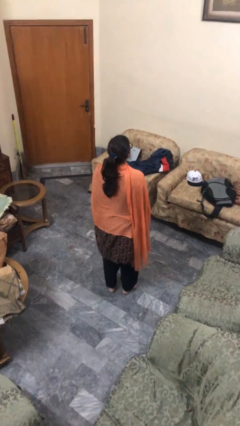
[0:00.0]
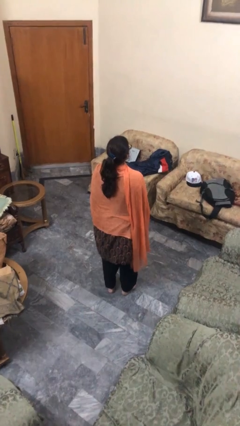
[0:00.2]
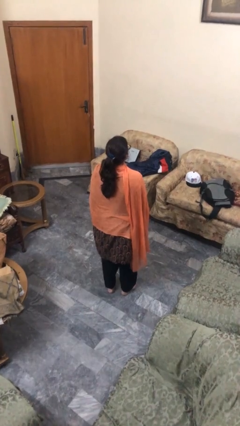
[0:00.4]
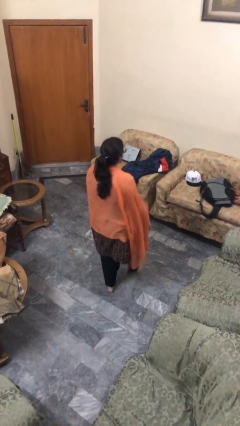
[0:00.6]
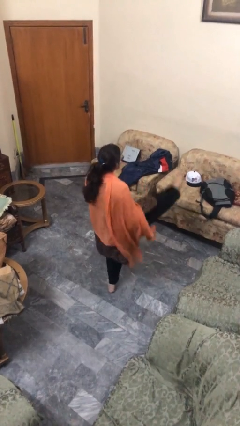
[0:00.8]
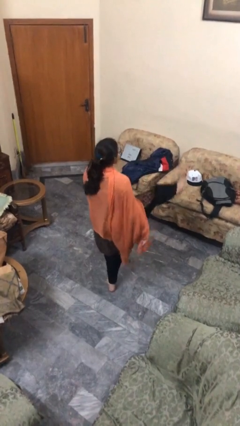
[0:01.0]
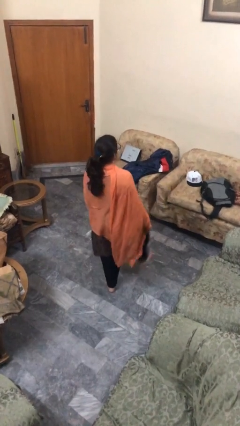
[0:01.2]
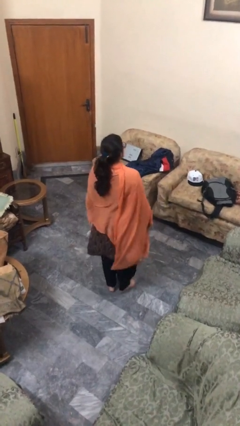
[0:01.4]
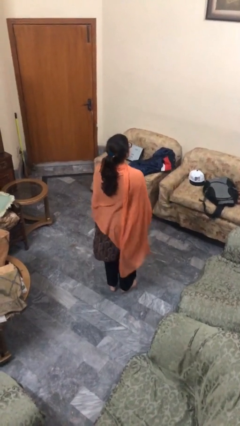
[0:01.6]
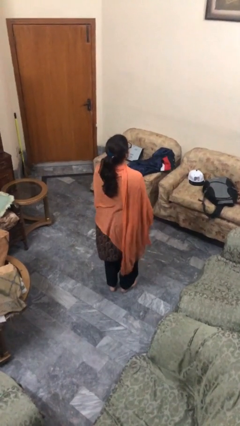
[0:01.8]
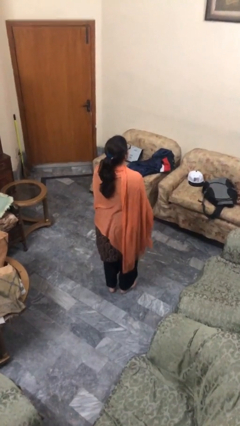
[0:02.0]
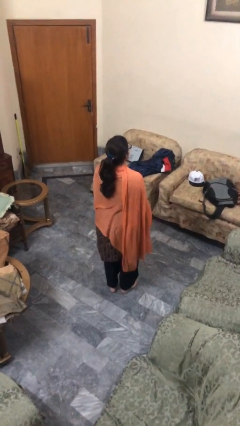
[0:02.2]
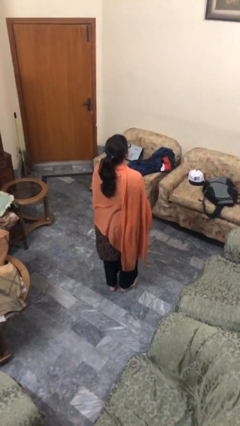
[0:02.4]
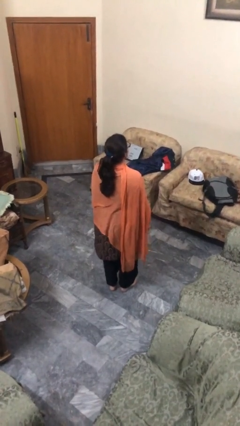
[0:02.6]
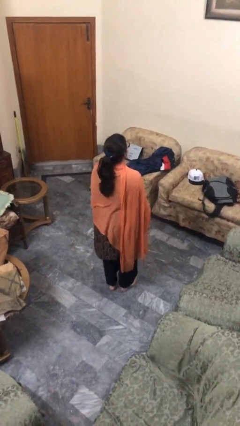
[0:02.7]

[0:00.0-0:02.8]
person karate kicks

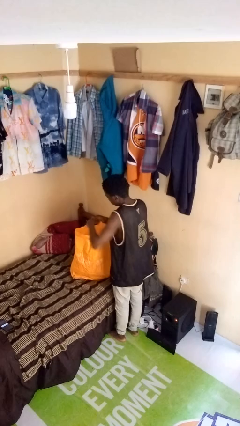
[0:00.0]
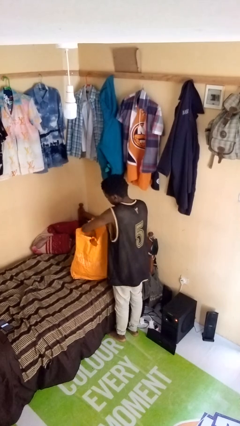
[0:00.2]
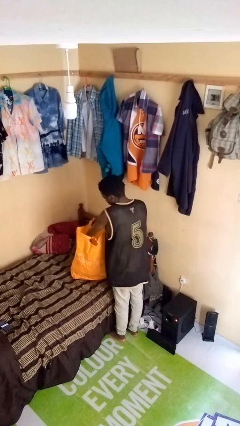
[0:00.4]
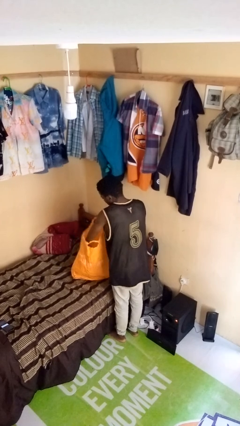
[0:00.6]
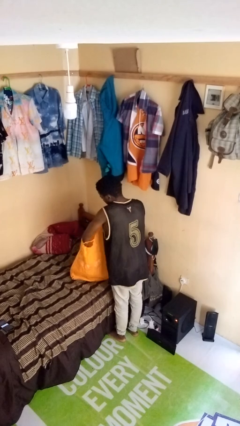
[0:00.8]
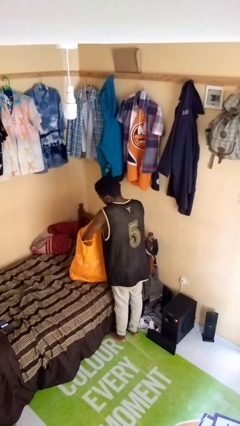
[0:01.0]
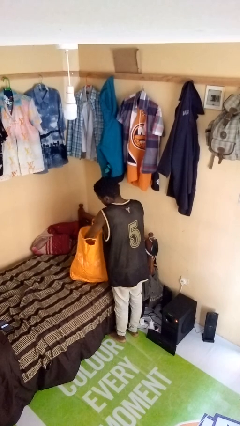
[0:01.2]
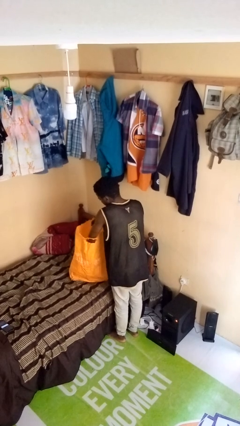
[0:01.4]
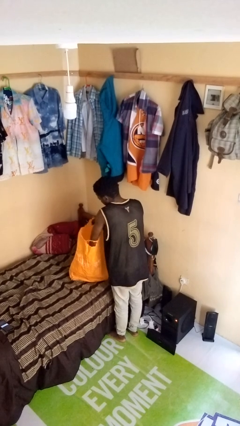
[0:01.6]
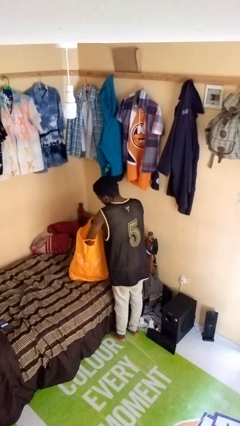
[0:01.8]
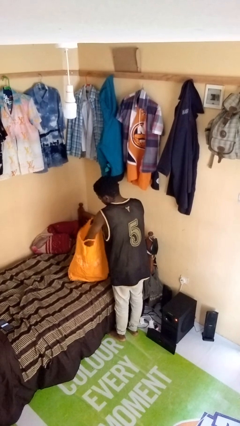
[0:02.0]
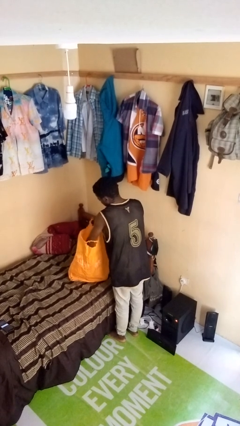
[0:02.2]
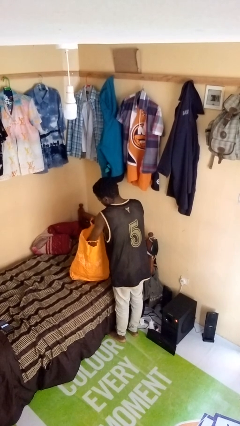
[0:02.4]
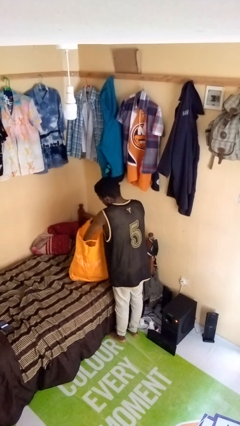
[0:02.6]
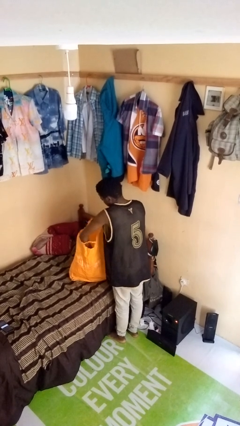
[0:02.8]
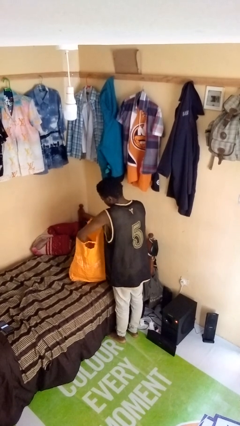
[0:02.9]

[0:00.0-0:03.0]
person searches in bag

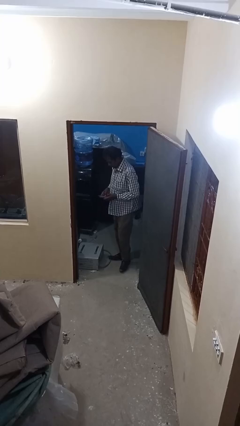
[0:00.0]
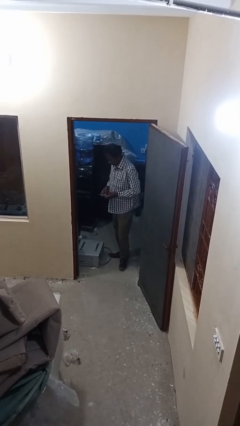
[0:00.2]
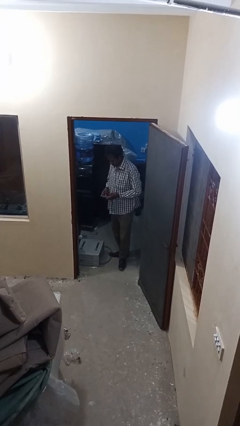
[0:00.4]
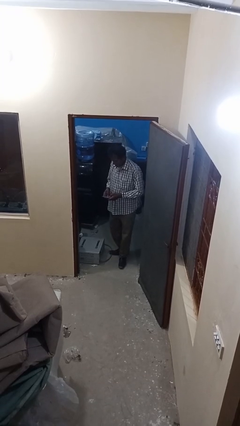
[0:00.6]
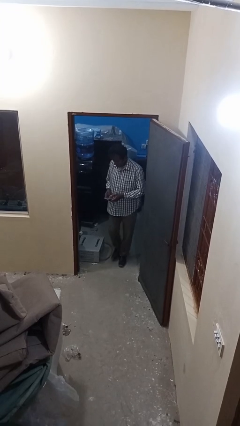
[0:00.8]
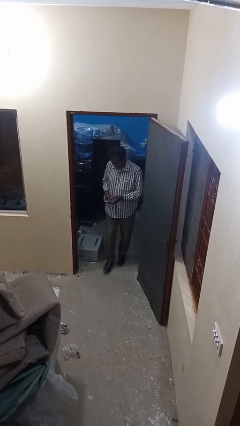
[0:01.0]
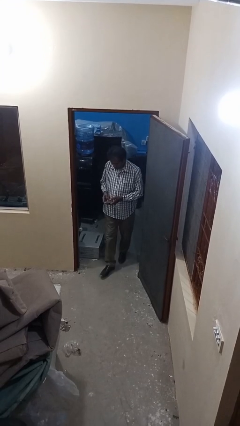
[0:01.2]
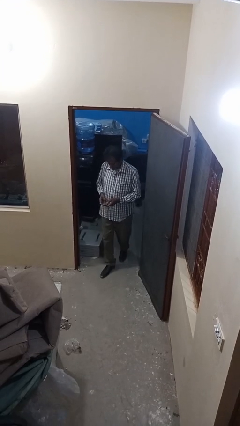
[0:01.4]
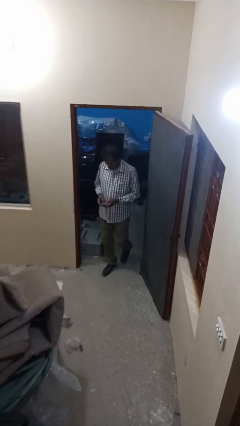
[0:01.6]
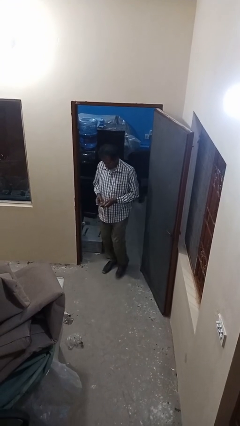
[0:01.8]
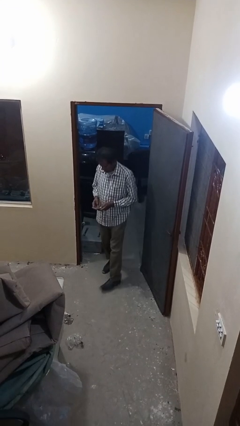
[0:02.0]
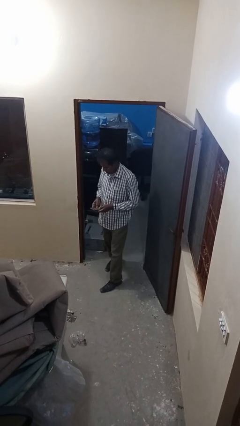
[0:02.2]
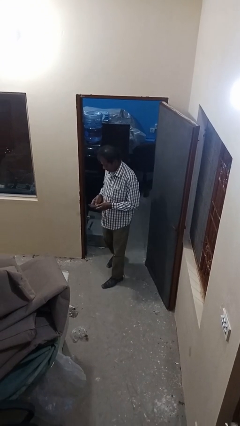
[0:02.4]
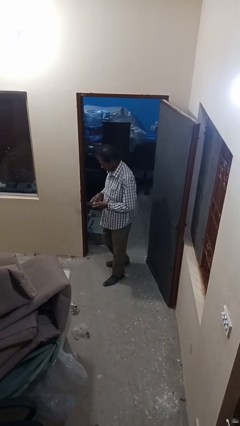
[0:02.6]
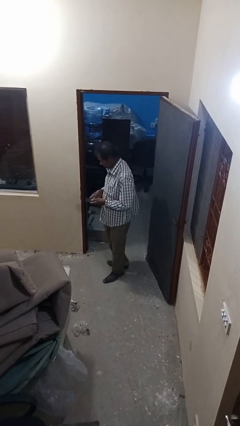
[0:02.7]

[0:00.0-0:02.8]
person enters scene through structure

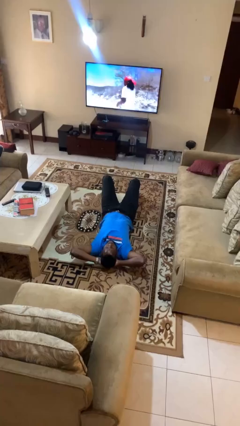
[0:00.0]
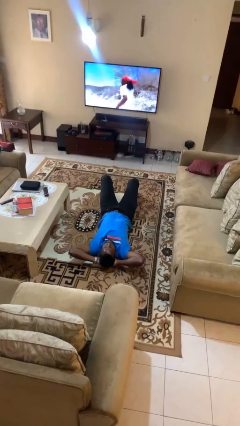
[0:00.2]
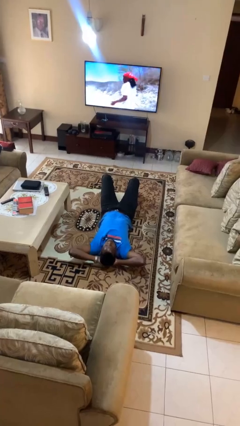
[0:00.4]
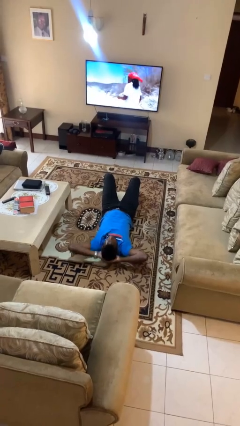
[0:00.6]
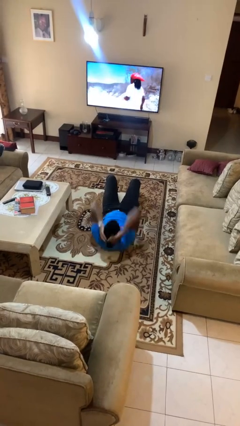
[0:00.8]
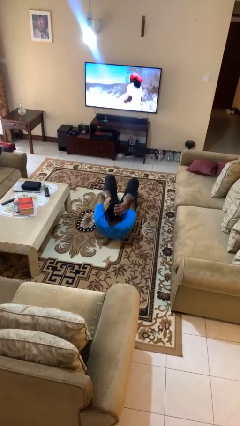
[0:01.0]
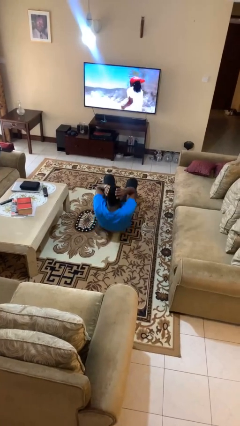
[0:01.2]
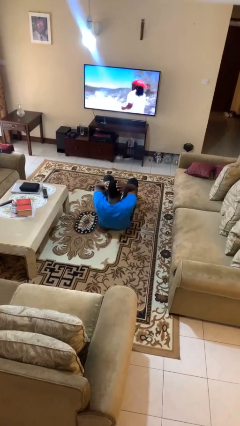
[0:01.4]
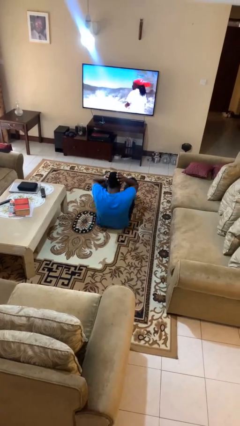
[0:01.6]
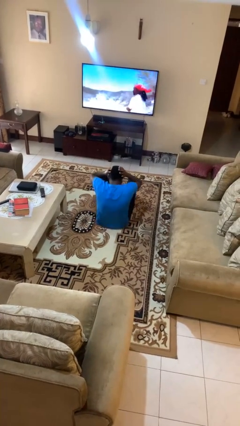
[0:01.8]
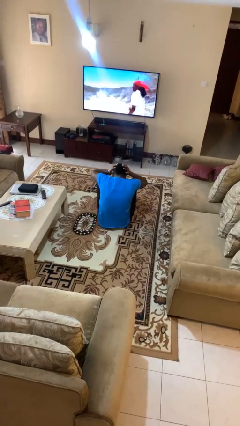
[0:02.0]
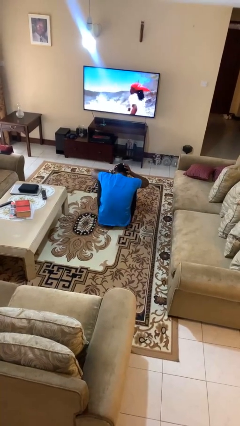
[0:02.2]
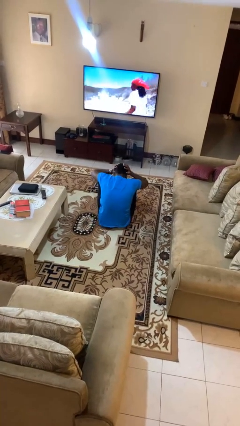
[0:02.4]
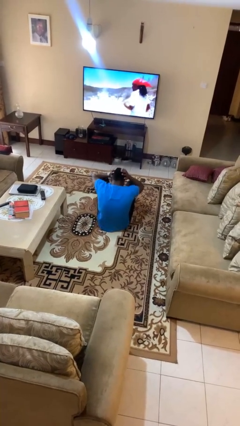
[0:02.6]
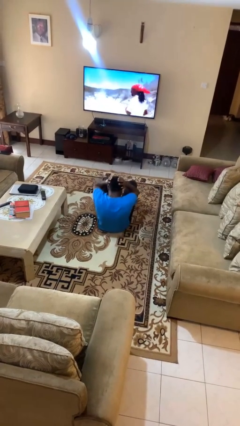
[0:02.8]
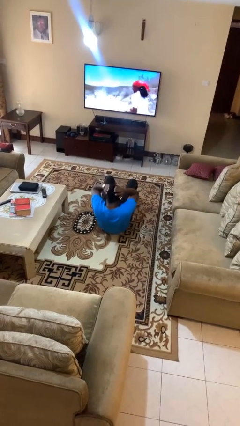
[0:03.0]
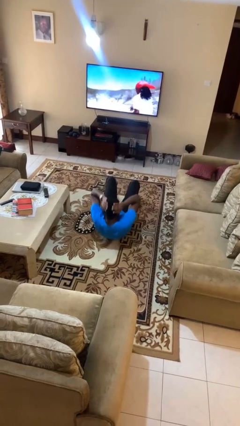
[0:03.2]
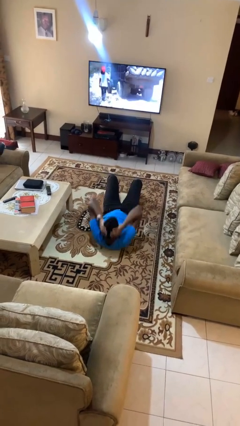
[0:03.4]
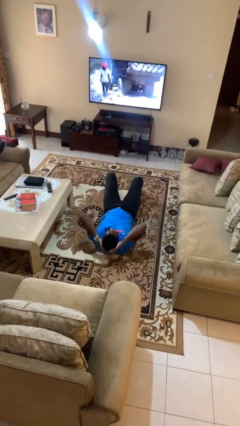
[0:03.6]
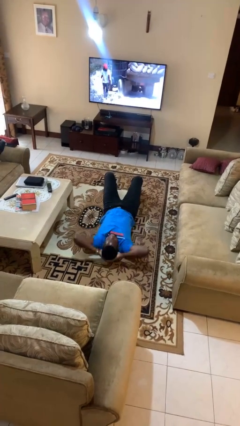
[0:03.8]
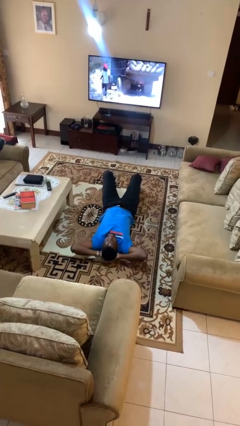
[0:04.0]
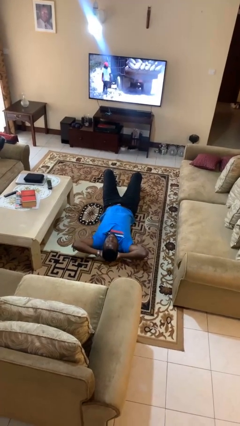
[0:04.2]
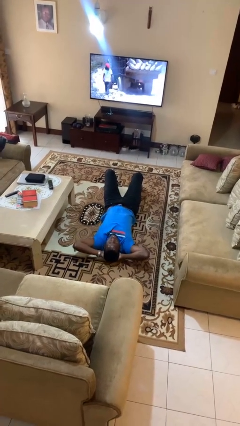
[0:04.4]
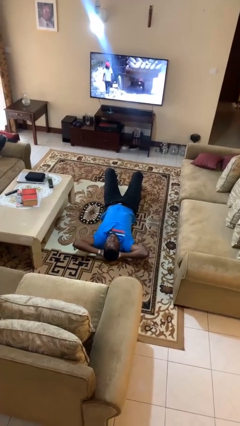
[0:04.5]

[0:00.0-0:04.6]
person exercises with situp

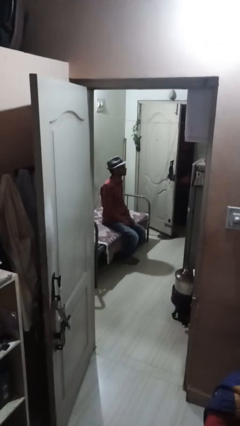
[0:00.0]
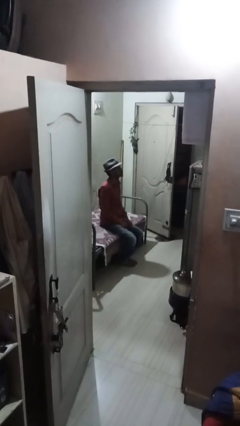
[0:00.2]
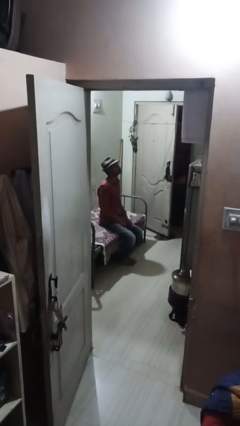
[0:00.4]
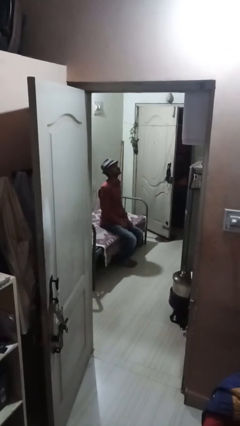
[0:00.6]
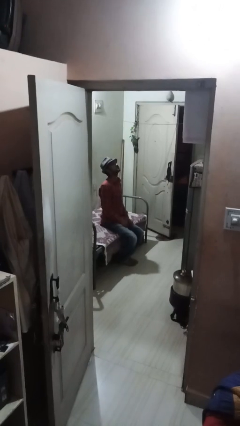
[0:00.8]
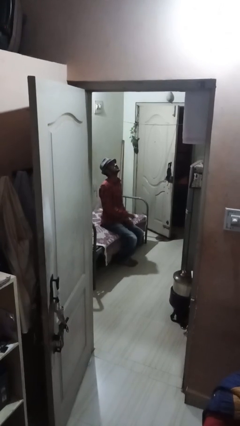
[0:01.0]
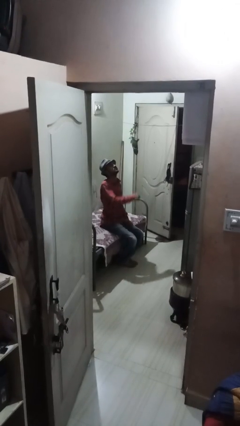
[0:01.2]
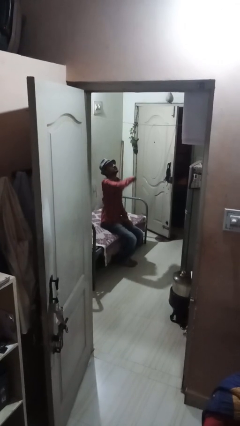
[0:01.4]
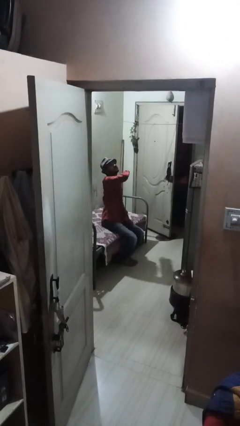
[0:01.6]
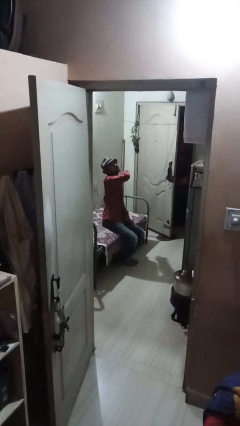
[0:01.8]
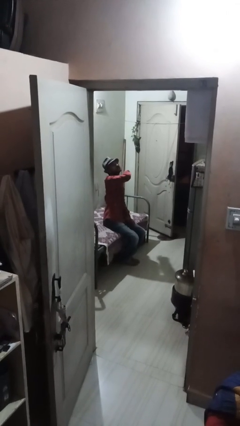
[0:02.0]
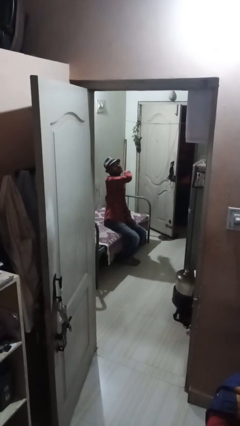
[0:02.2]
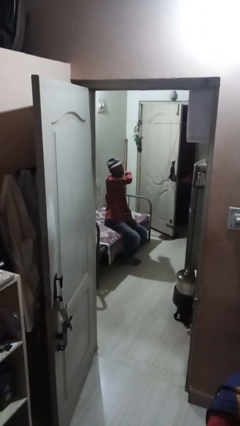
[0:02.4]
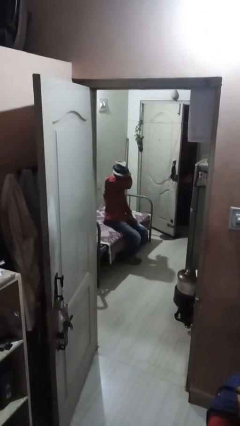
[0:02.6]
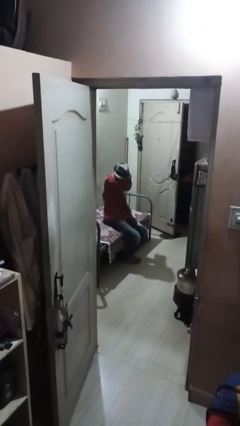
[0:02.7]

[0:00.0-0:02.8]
person sneezes into arm

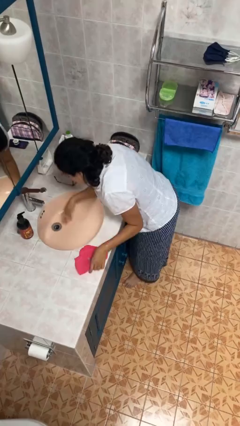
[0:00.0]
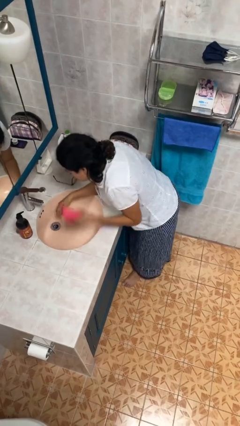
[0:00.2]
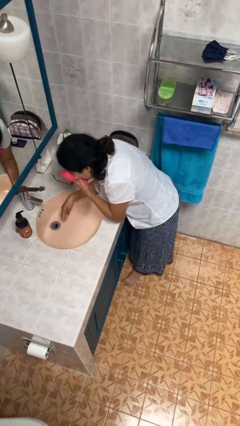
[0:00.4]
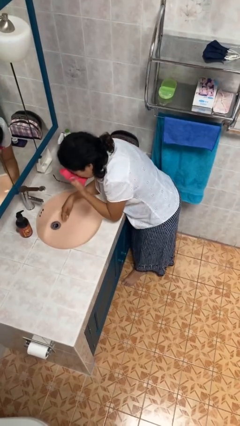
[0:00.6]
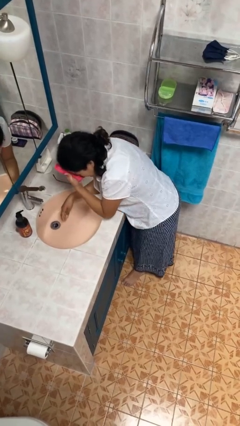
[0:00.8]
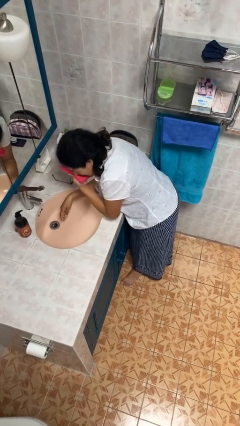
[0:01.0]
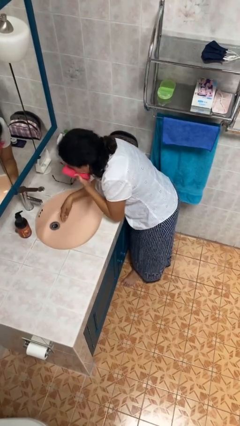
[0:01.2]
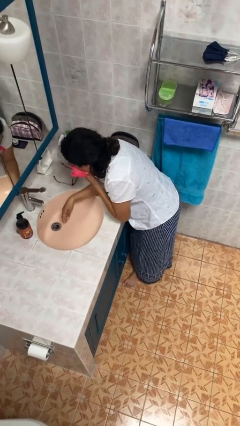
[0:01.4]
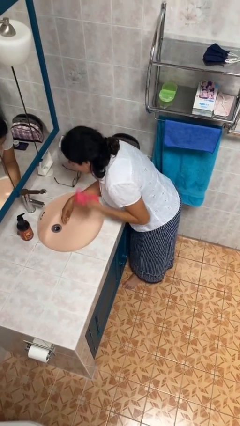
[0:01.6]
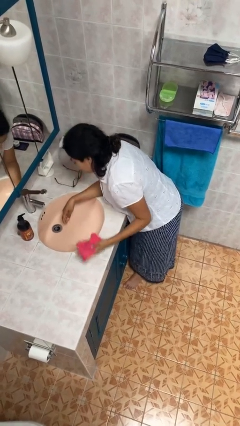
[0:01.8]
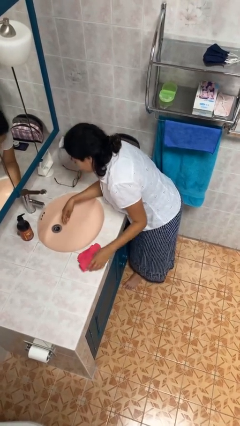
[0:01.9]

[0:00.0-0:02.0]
person dries face with towel
